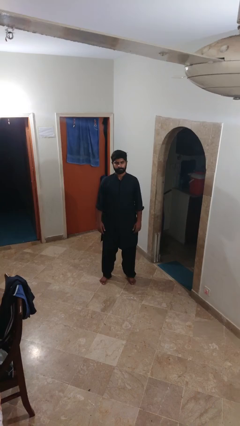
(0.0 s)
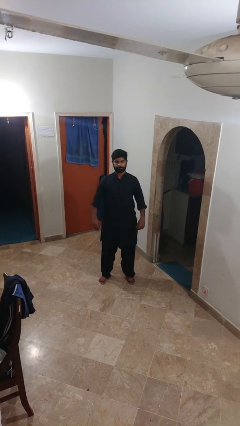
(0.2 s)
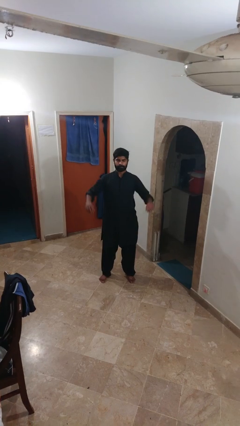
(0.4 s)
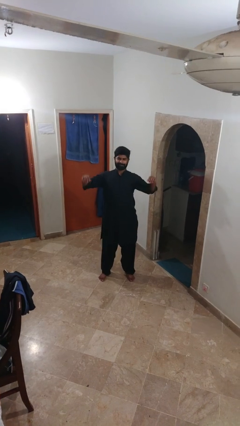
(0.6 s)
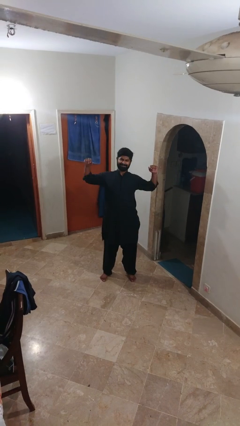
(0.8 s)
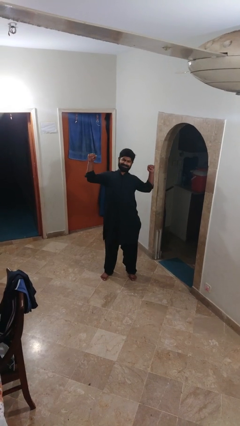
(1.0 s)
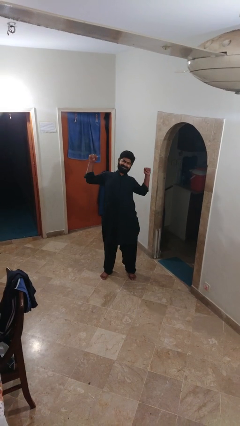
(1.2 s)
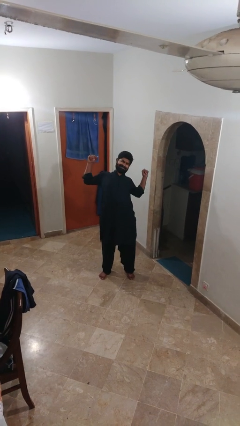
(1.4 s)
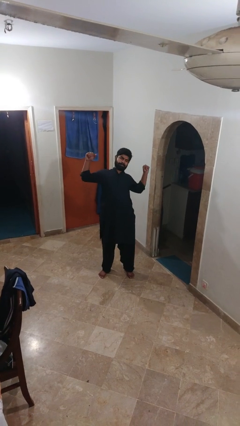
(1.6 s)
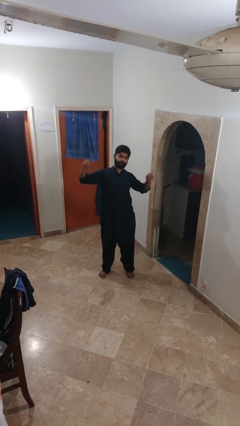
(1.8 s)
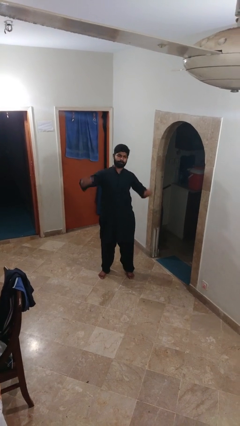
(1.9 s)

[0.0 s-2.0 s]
person stretches arms to side

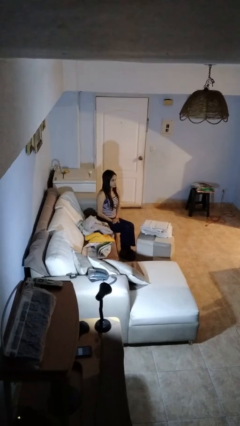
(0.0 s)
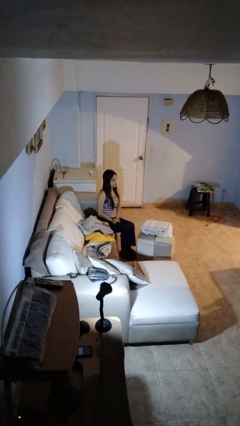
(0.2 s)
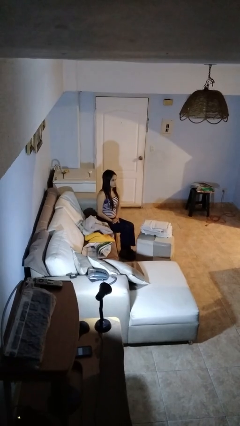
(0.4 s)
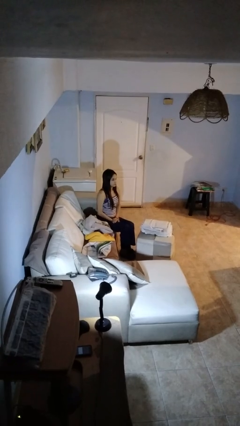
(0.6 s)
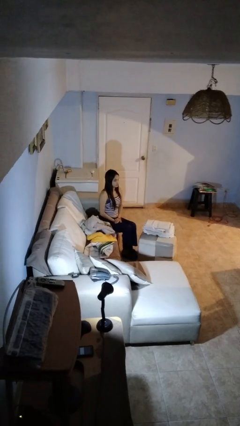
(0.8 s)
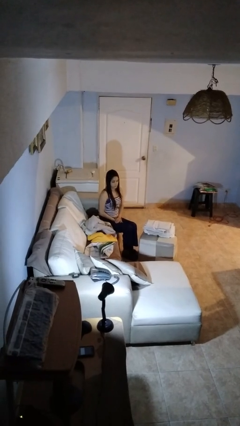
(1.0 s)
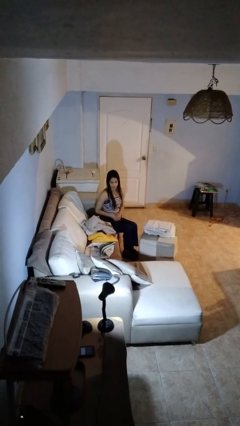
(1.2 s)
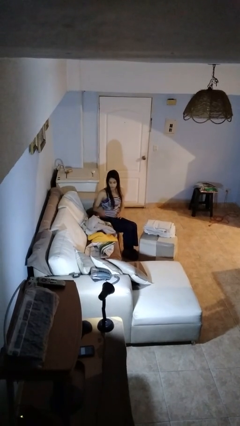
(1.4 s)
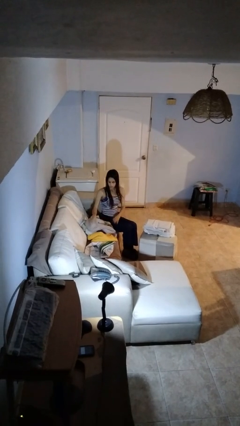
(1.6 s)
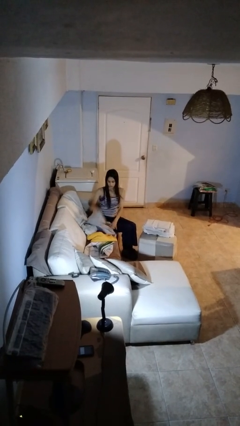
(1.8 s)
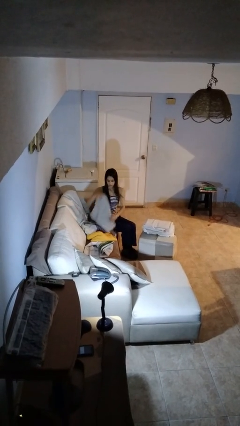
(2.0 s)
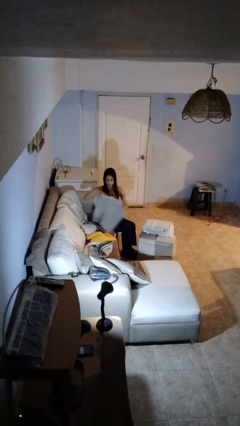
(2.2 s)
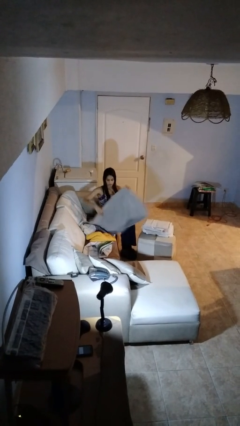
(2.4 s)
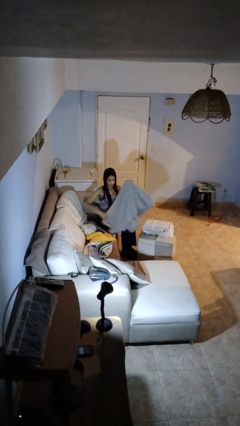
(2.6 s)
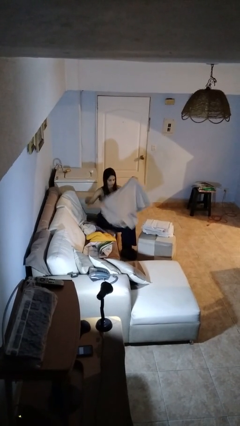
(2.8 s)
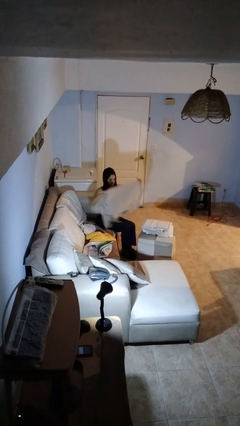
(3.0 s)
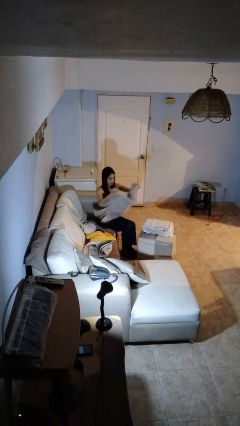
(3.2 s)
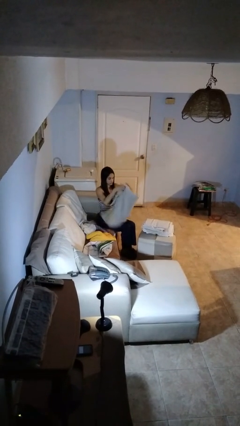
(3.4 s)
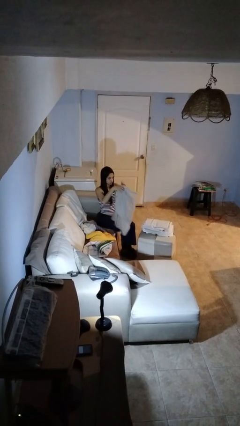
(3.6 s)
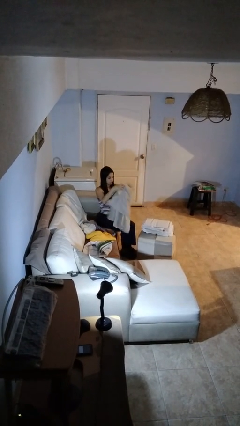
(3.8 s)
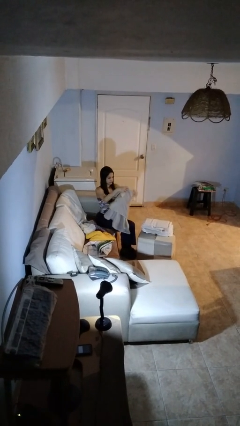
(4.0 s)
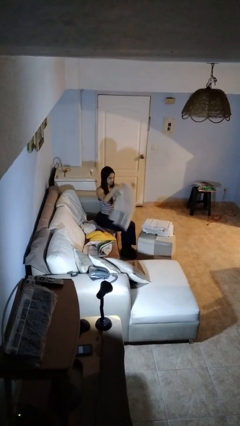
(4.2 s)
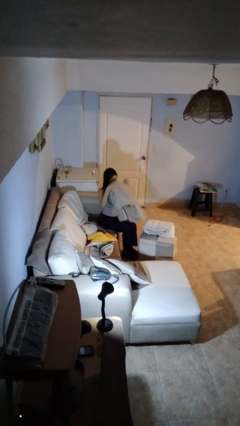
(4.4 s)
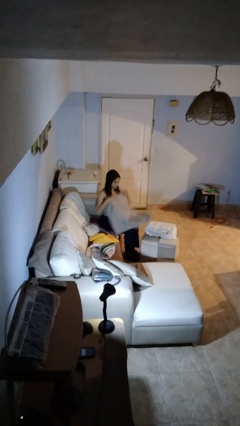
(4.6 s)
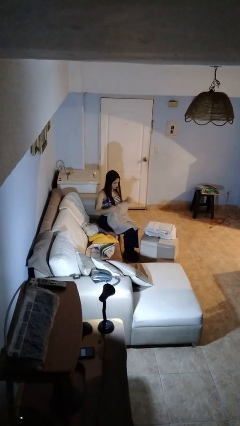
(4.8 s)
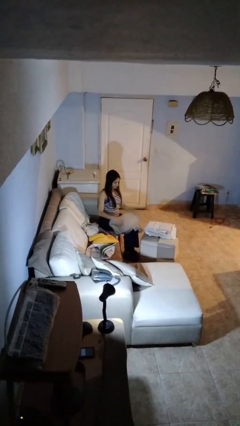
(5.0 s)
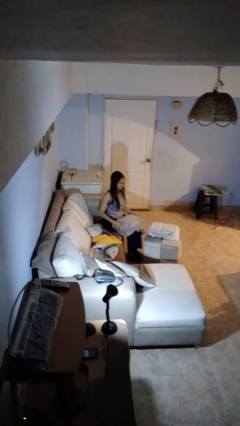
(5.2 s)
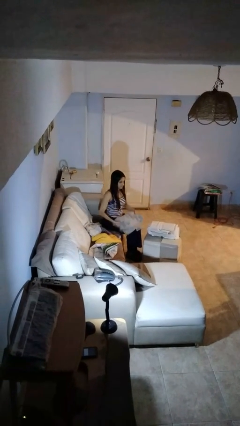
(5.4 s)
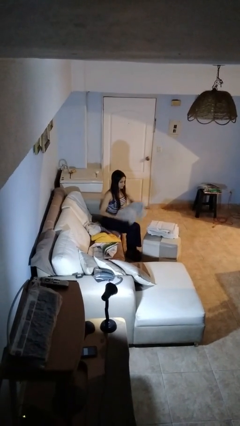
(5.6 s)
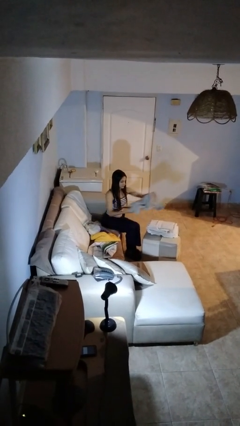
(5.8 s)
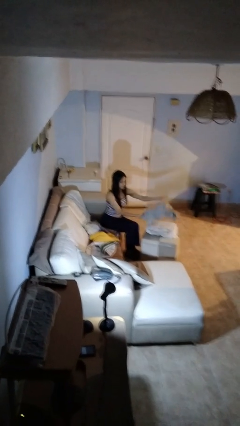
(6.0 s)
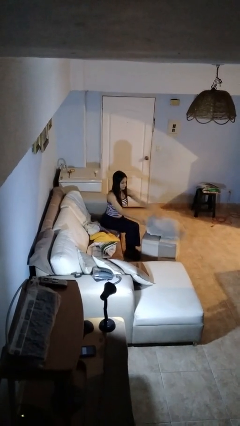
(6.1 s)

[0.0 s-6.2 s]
person folds towel

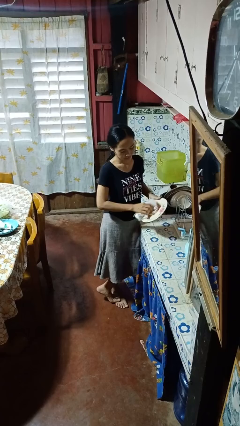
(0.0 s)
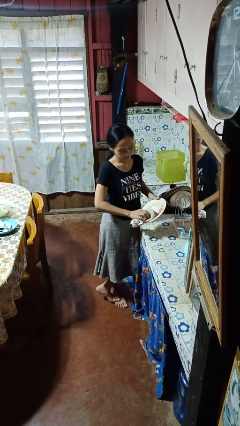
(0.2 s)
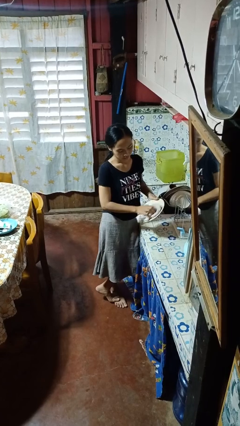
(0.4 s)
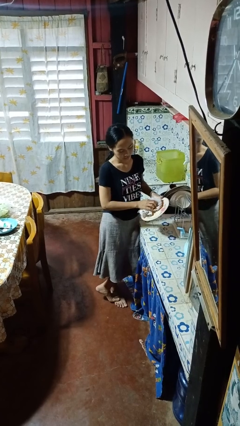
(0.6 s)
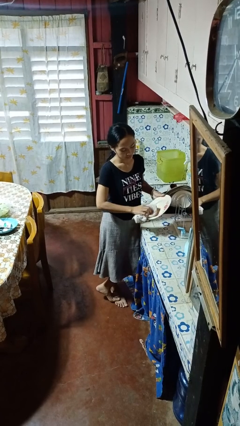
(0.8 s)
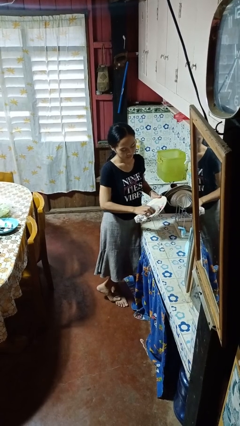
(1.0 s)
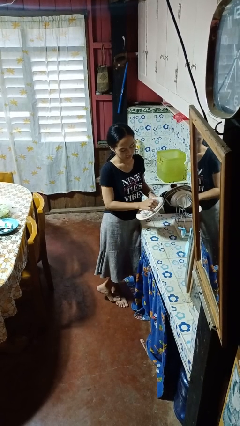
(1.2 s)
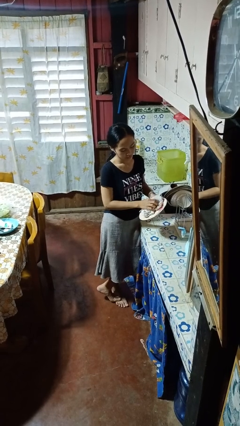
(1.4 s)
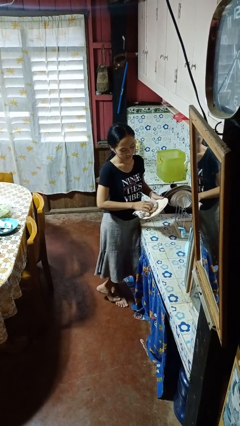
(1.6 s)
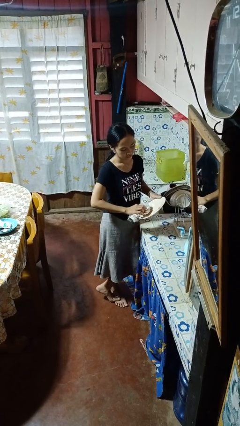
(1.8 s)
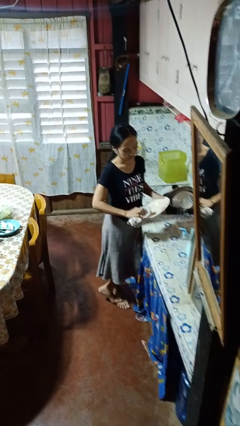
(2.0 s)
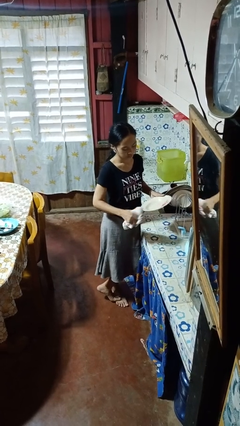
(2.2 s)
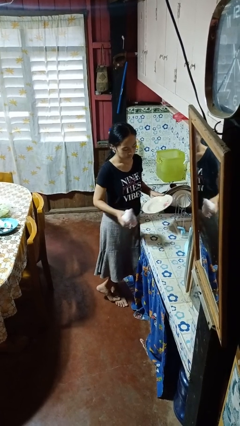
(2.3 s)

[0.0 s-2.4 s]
person dries dish

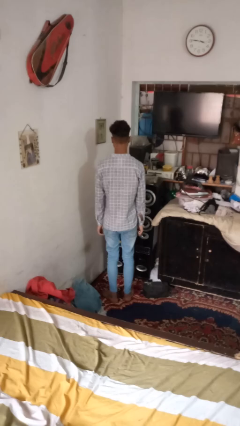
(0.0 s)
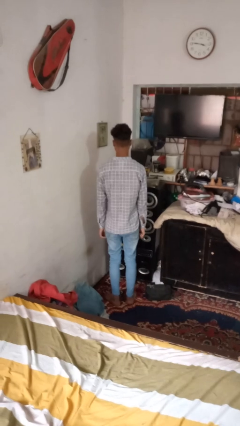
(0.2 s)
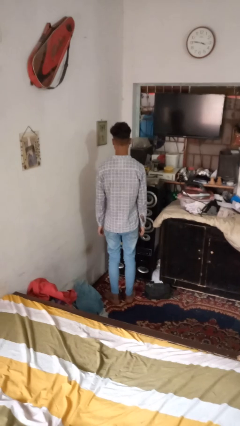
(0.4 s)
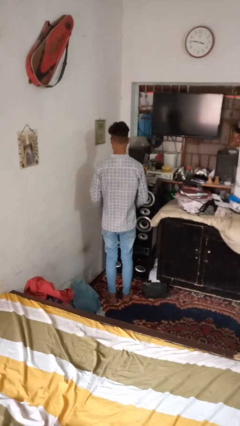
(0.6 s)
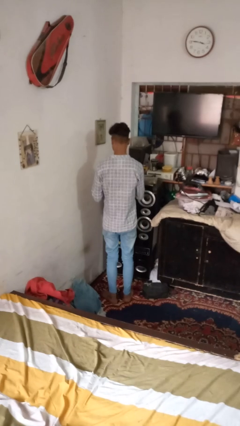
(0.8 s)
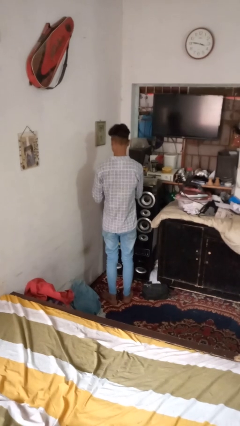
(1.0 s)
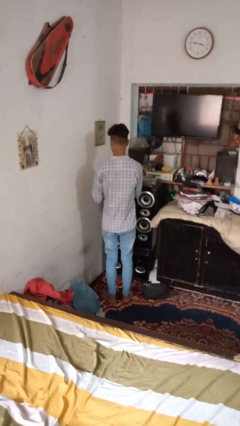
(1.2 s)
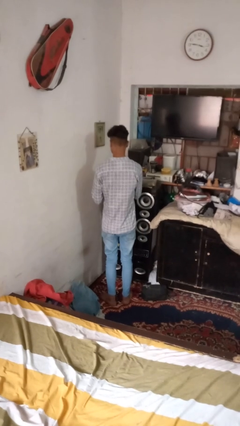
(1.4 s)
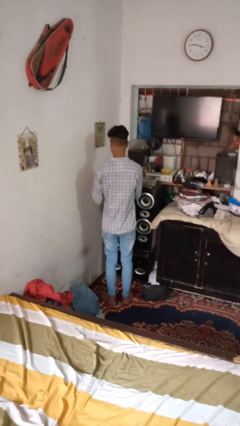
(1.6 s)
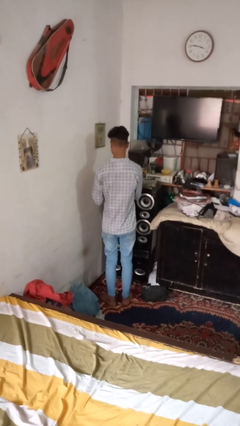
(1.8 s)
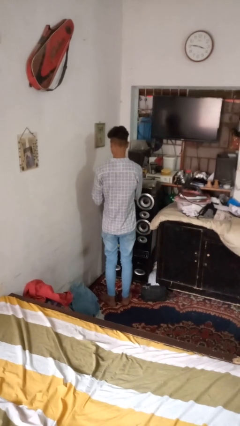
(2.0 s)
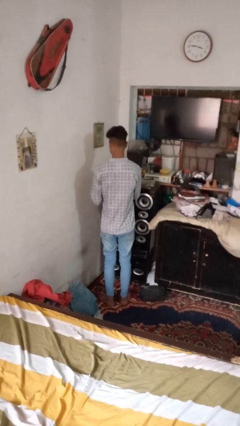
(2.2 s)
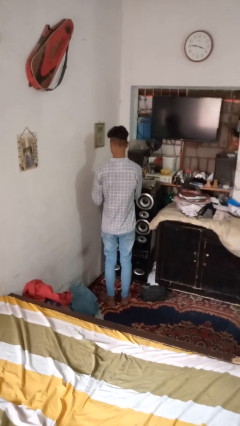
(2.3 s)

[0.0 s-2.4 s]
person files fingernails

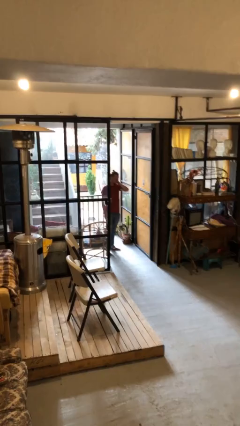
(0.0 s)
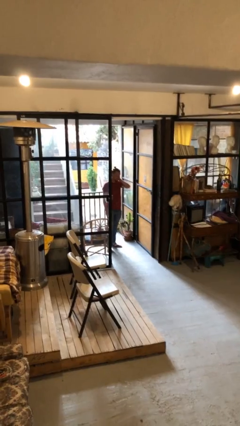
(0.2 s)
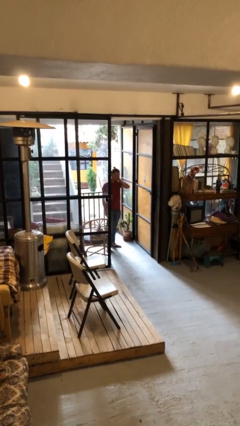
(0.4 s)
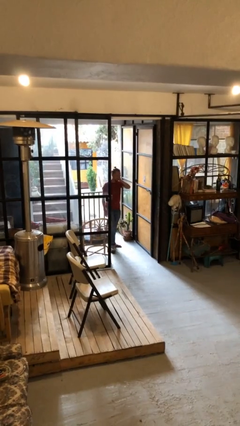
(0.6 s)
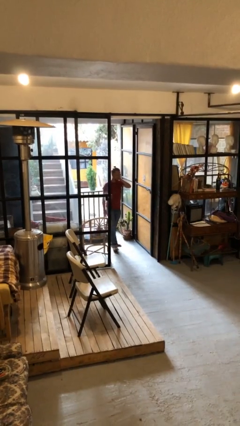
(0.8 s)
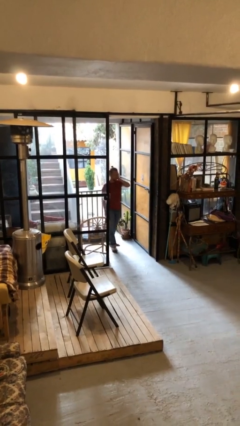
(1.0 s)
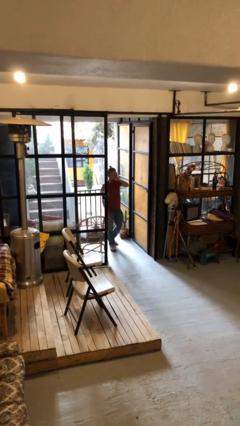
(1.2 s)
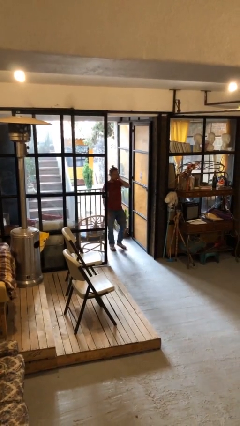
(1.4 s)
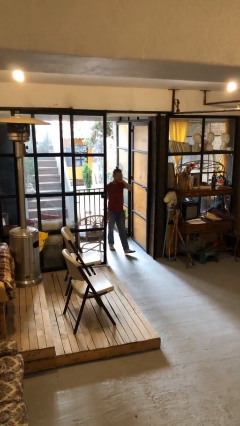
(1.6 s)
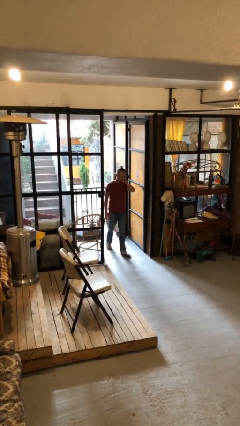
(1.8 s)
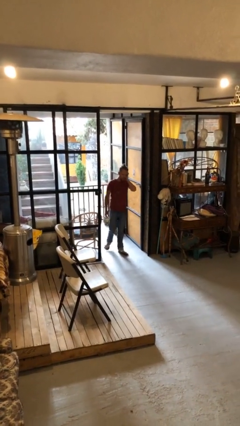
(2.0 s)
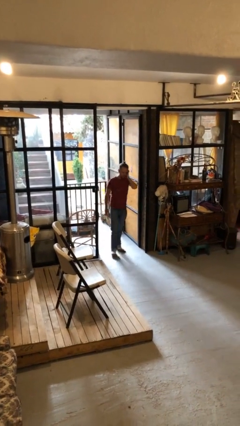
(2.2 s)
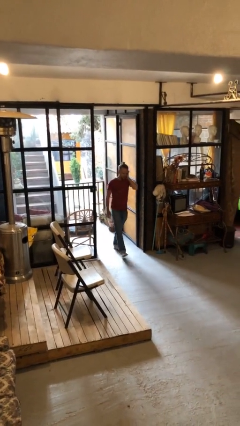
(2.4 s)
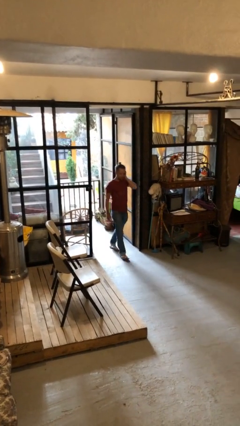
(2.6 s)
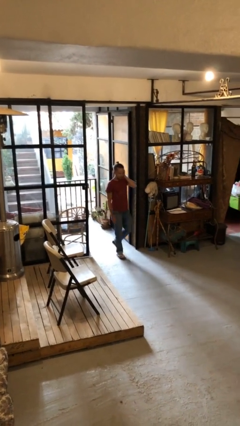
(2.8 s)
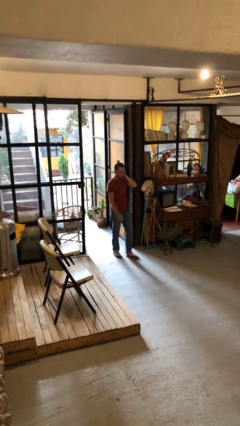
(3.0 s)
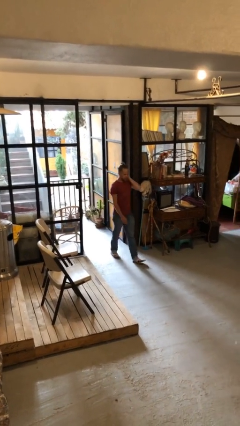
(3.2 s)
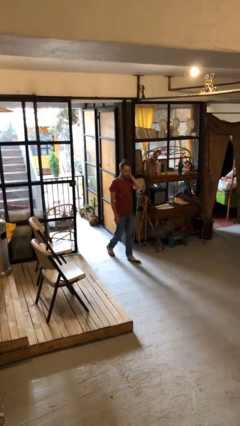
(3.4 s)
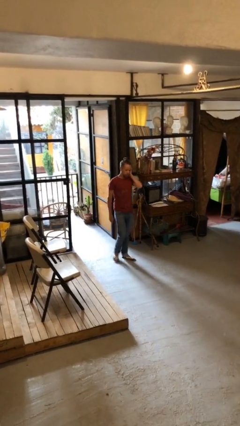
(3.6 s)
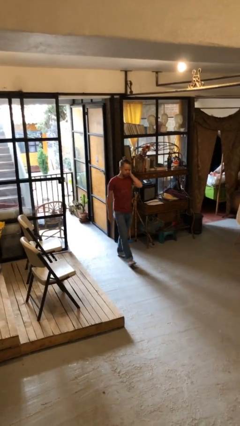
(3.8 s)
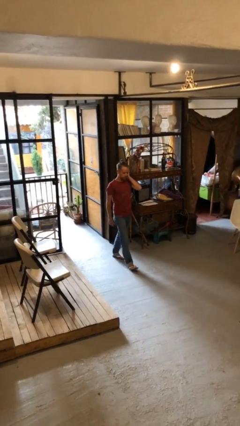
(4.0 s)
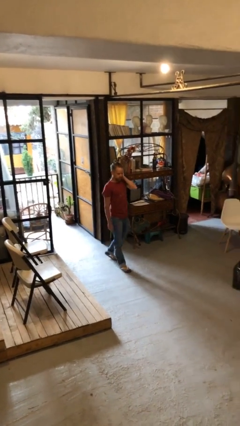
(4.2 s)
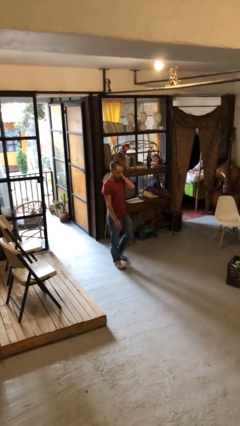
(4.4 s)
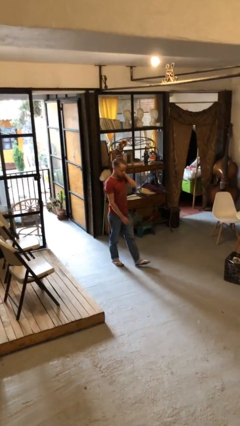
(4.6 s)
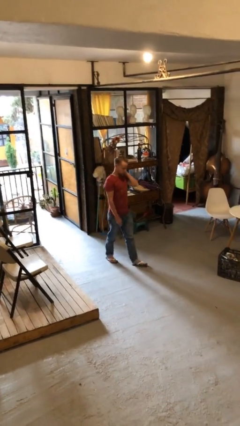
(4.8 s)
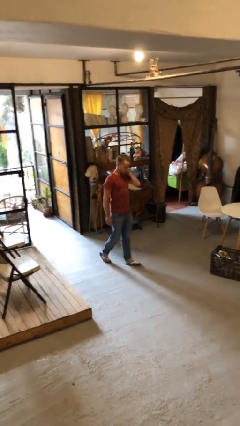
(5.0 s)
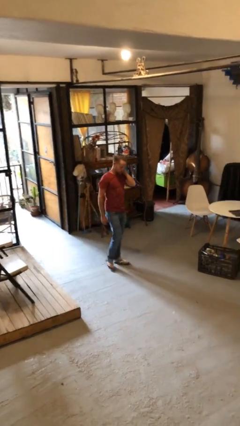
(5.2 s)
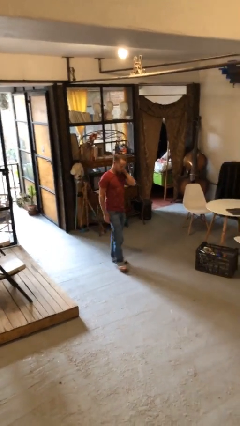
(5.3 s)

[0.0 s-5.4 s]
person enters scene through structure
